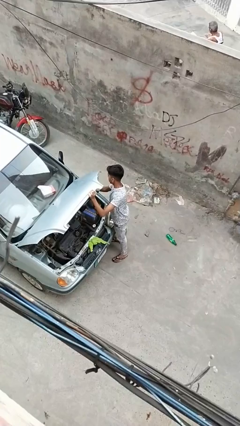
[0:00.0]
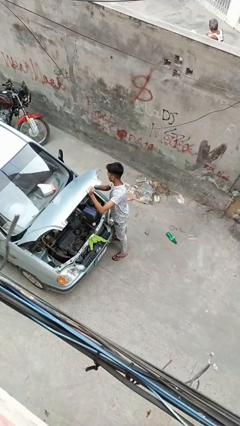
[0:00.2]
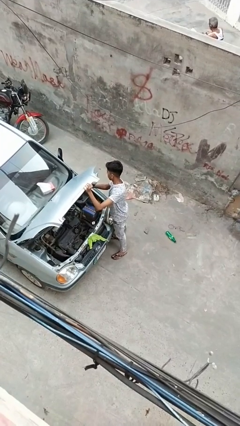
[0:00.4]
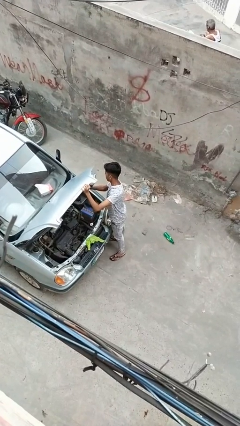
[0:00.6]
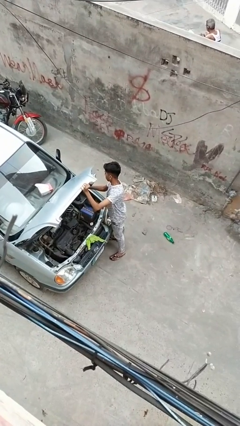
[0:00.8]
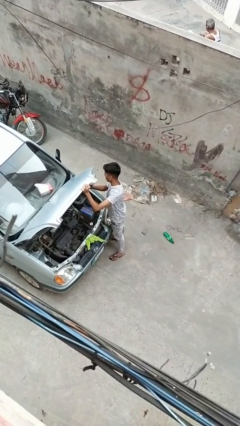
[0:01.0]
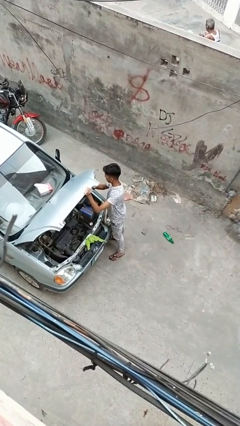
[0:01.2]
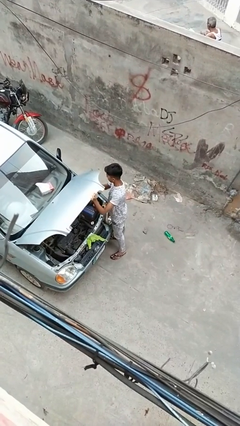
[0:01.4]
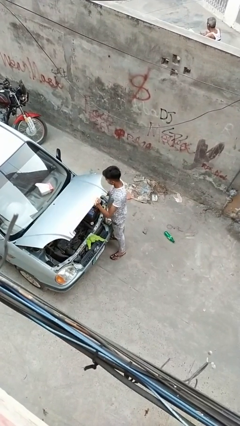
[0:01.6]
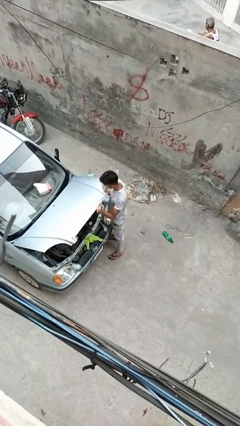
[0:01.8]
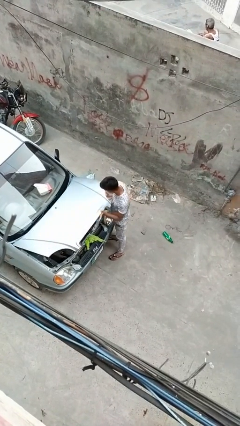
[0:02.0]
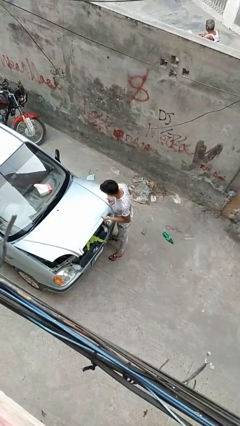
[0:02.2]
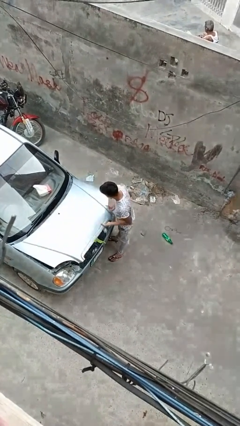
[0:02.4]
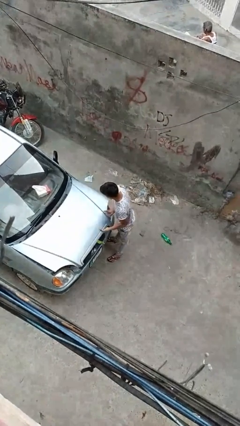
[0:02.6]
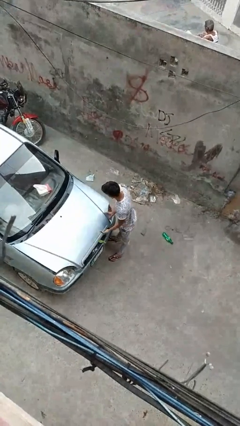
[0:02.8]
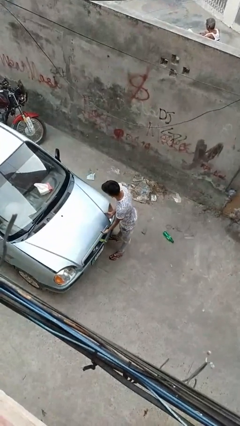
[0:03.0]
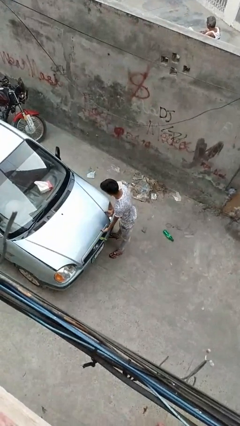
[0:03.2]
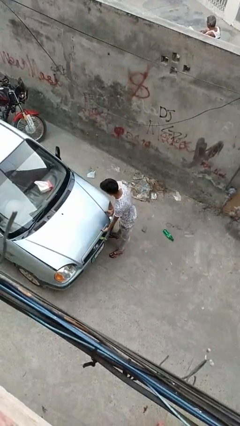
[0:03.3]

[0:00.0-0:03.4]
person closes car hood

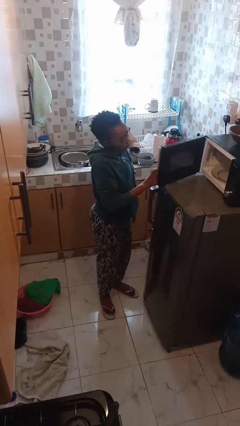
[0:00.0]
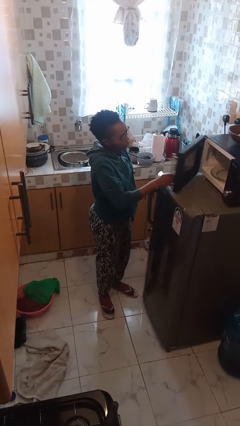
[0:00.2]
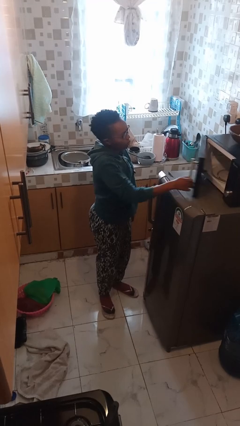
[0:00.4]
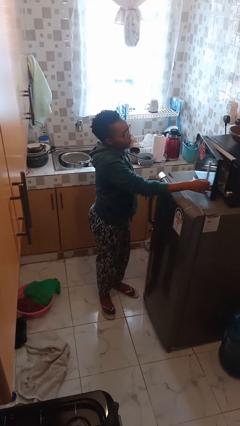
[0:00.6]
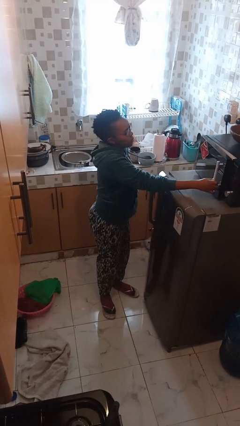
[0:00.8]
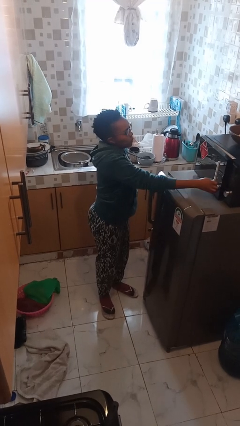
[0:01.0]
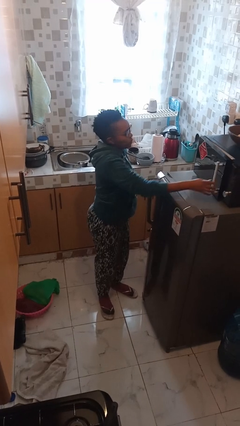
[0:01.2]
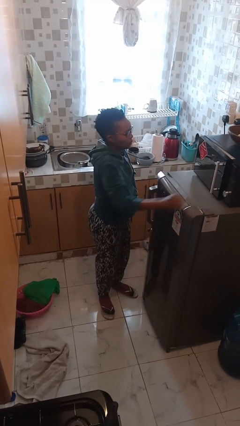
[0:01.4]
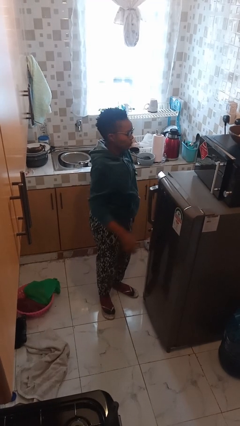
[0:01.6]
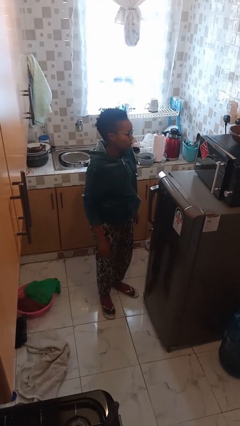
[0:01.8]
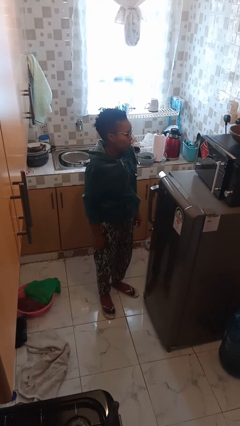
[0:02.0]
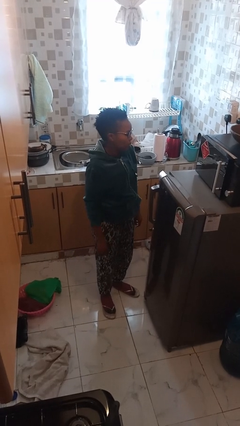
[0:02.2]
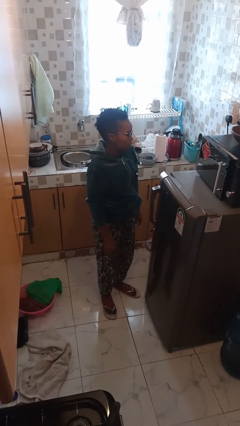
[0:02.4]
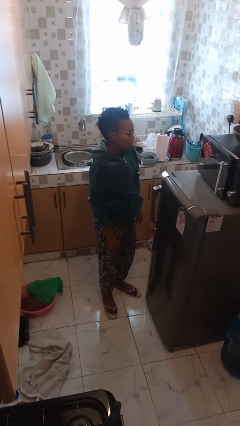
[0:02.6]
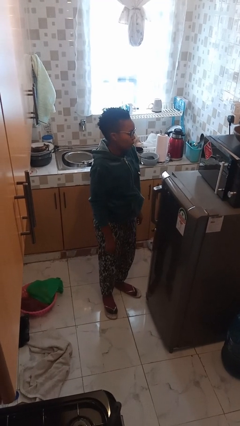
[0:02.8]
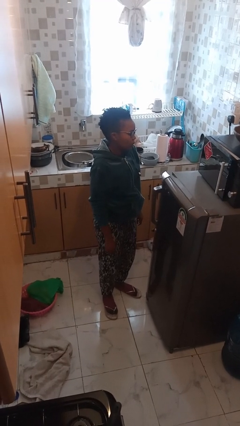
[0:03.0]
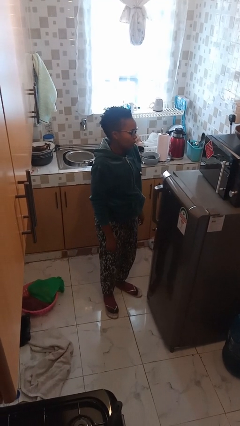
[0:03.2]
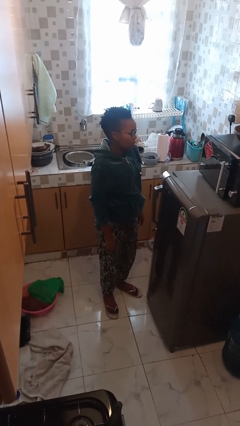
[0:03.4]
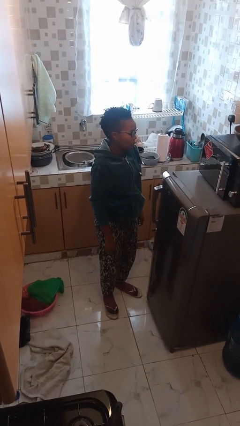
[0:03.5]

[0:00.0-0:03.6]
person closes microwave

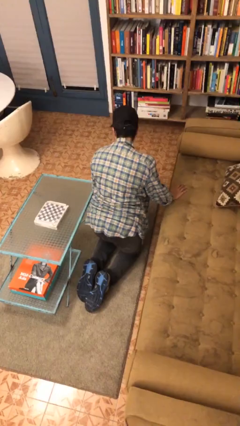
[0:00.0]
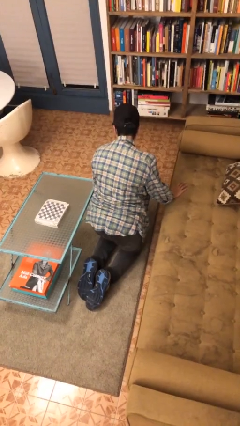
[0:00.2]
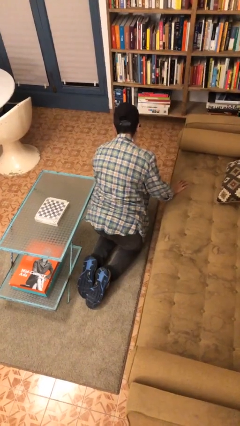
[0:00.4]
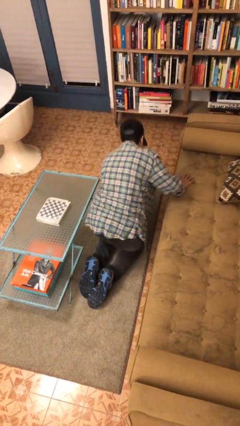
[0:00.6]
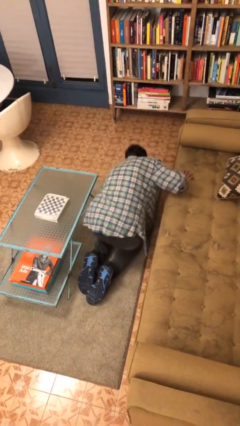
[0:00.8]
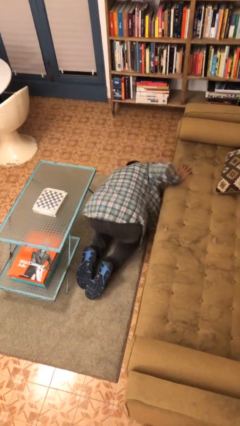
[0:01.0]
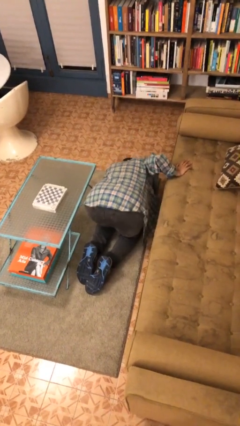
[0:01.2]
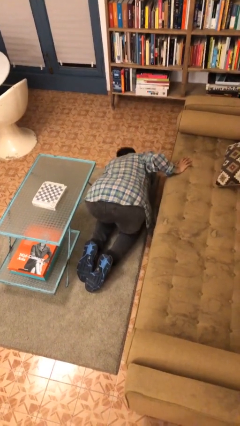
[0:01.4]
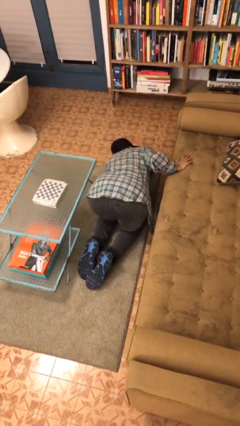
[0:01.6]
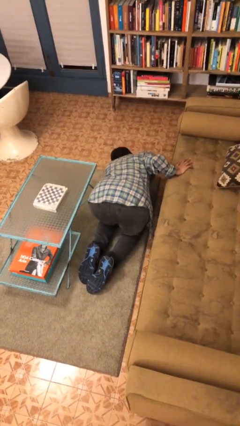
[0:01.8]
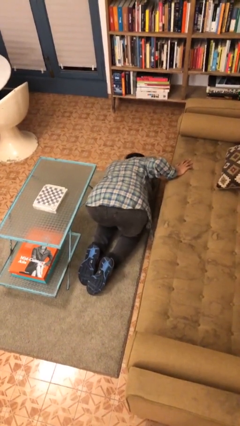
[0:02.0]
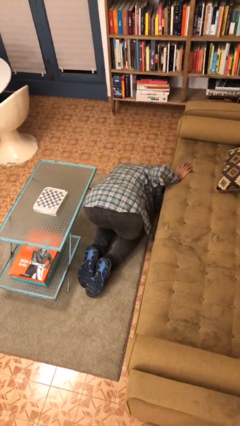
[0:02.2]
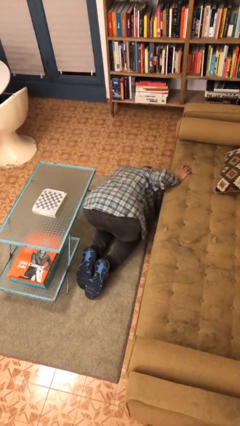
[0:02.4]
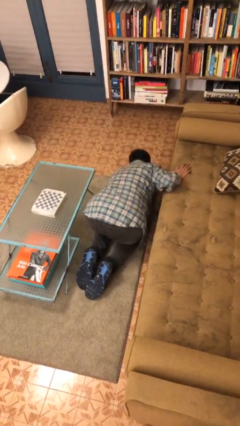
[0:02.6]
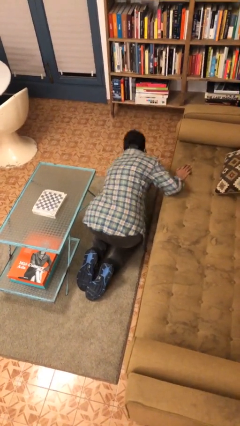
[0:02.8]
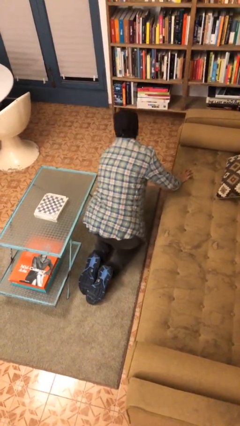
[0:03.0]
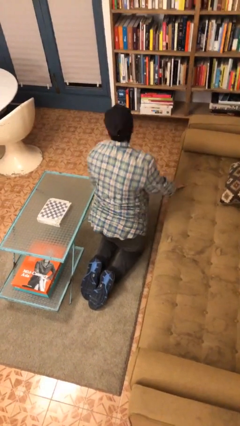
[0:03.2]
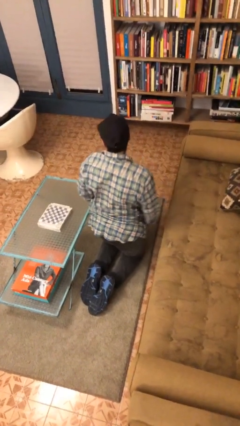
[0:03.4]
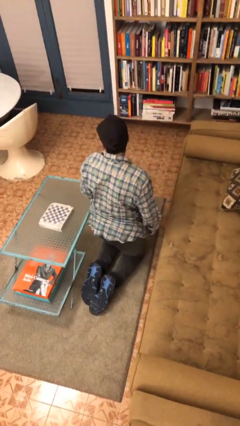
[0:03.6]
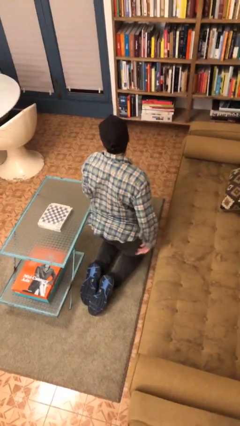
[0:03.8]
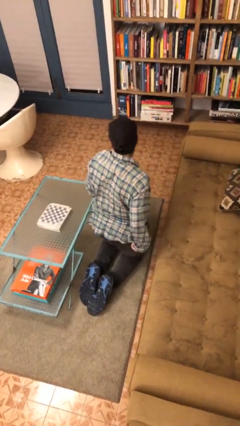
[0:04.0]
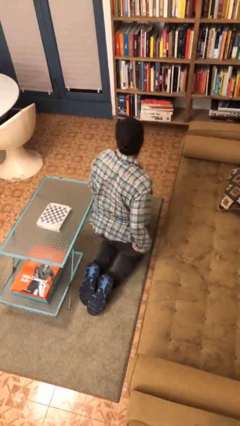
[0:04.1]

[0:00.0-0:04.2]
person searches under couch

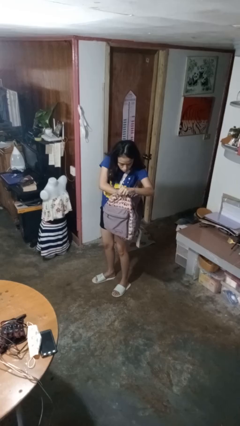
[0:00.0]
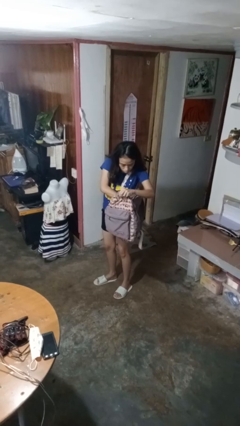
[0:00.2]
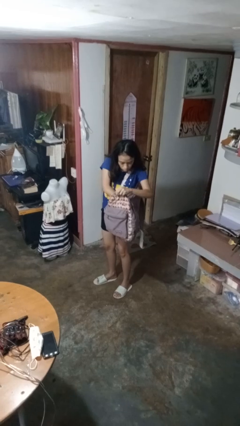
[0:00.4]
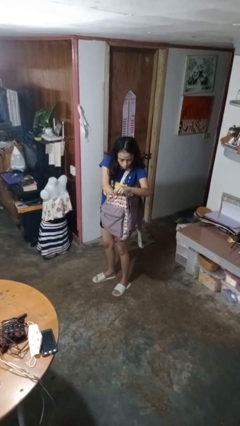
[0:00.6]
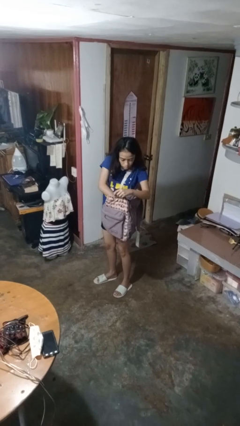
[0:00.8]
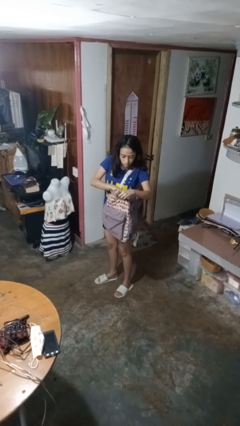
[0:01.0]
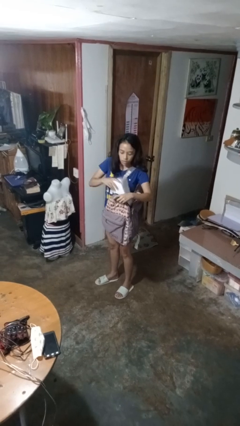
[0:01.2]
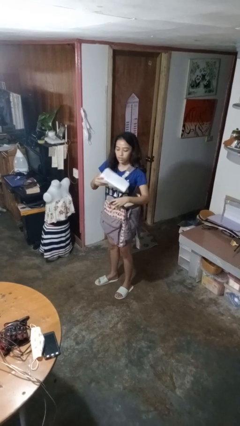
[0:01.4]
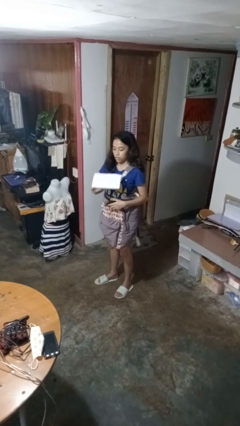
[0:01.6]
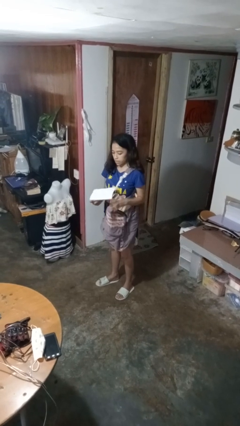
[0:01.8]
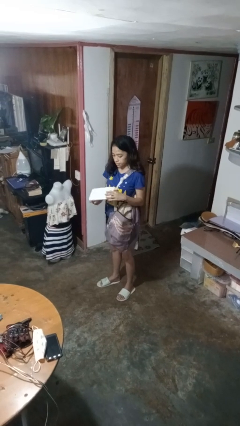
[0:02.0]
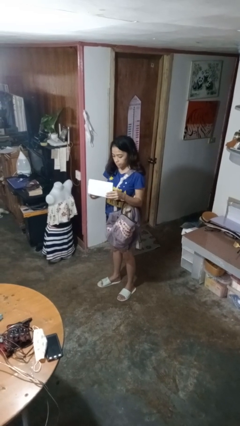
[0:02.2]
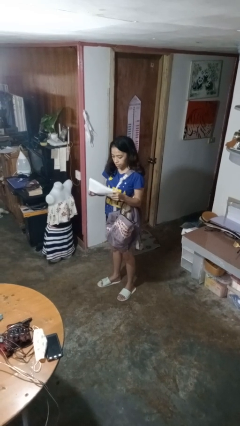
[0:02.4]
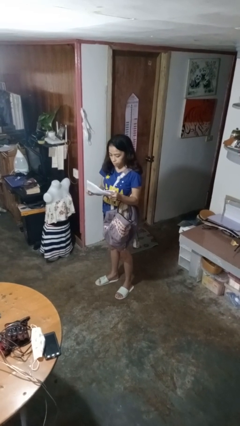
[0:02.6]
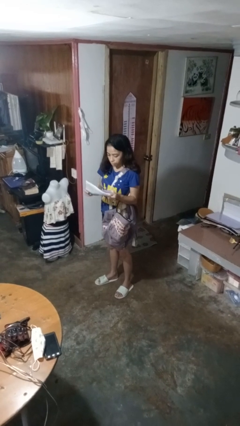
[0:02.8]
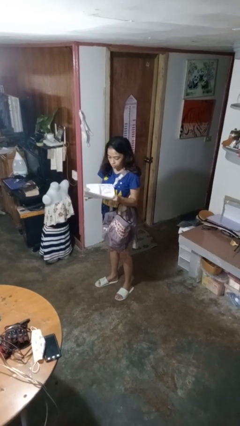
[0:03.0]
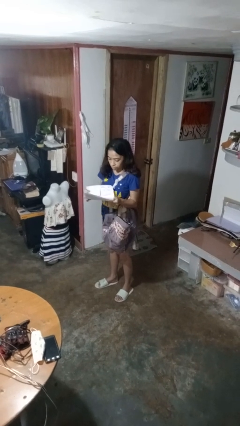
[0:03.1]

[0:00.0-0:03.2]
person takes object from backpack

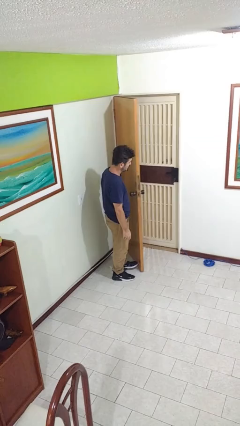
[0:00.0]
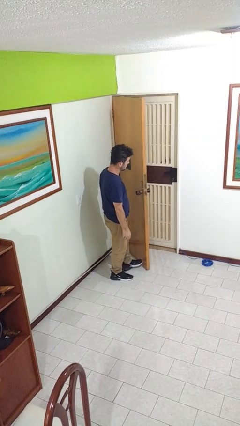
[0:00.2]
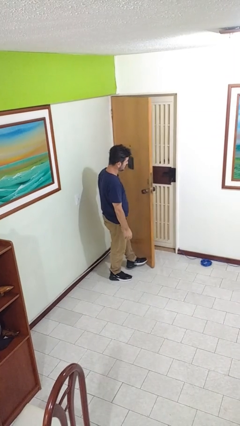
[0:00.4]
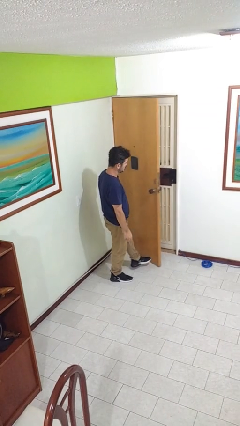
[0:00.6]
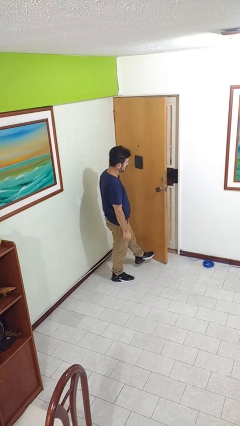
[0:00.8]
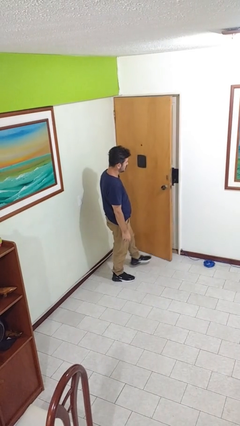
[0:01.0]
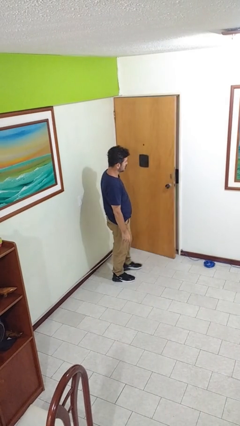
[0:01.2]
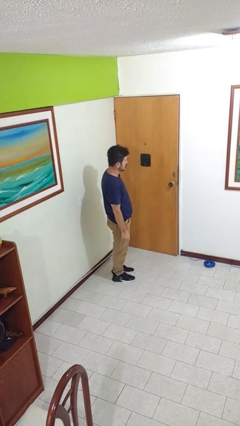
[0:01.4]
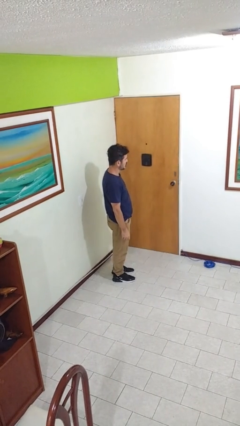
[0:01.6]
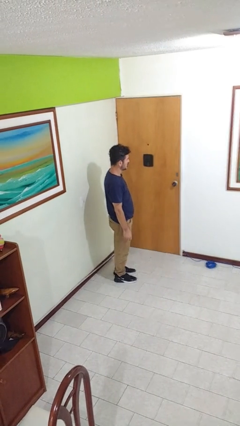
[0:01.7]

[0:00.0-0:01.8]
person closes door with foot

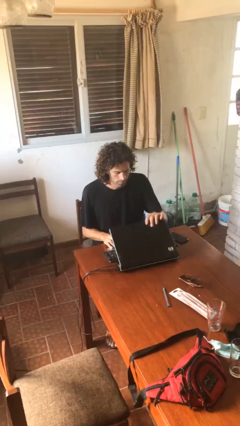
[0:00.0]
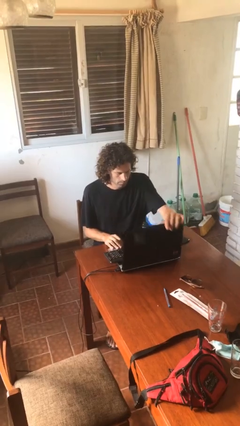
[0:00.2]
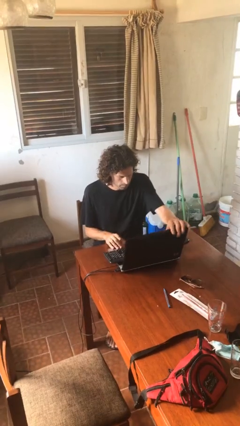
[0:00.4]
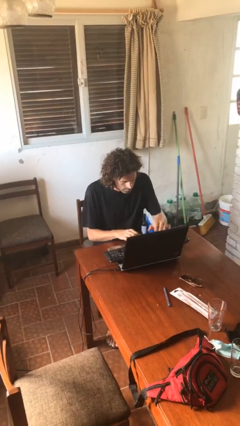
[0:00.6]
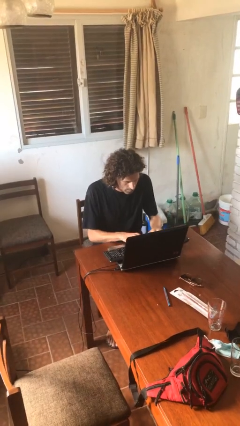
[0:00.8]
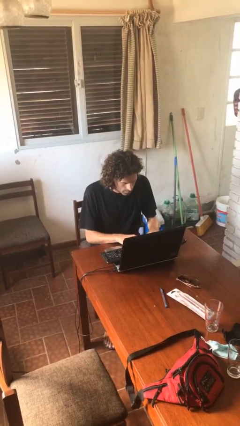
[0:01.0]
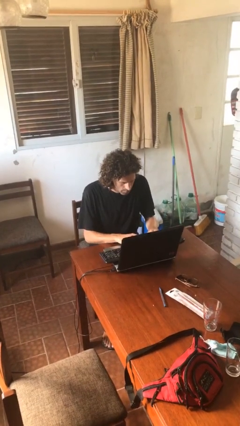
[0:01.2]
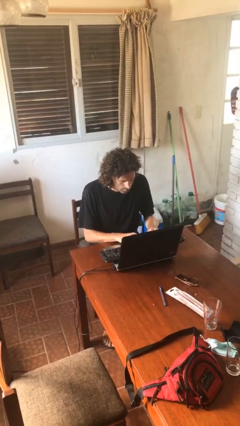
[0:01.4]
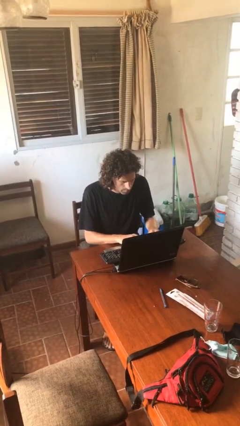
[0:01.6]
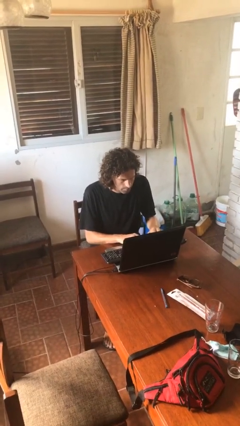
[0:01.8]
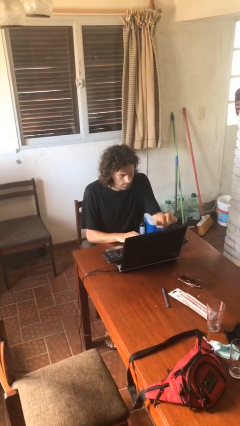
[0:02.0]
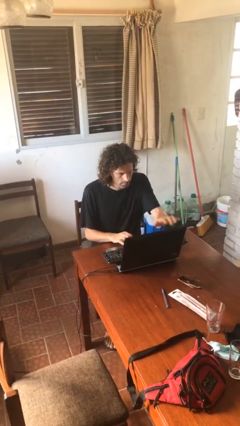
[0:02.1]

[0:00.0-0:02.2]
person interacts with laptop
